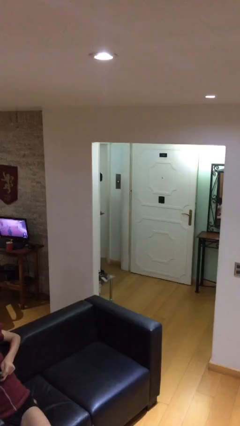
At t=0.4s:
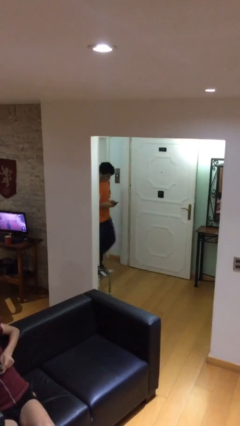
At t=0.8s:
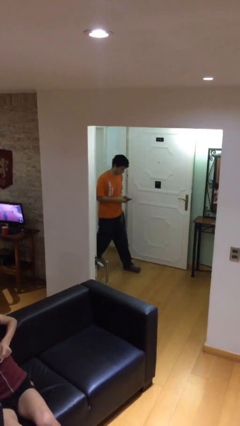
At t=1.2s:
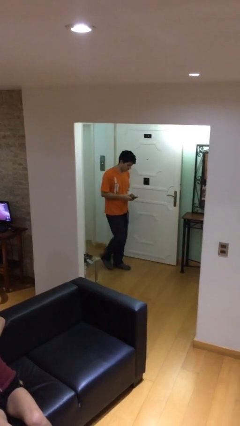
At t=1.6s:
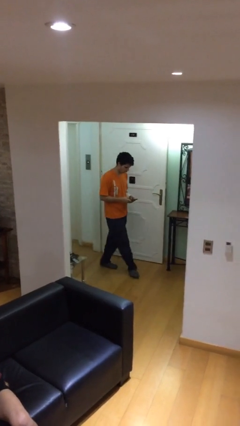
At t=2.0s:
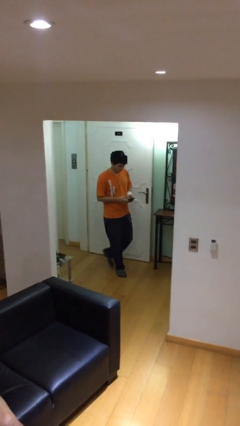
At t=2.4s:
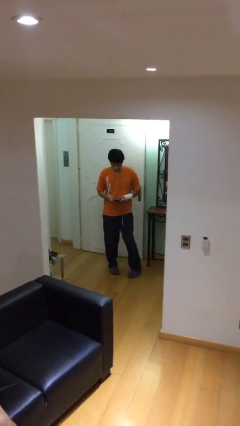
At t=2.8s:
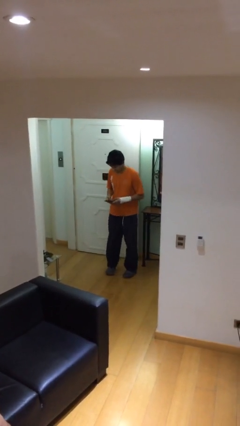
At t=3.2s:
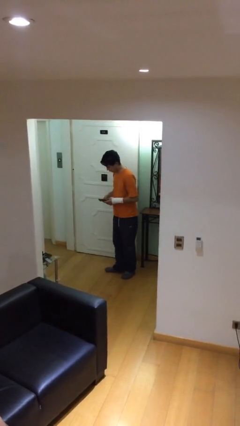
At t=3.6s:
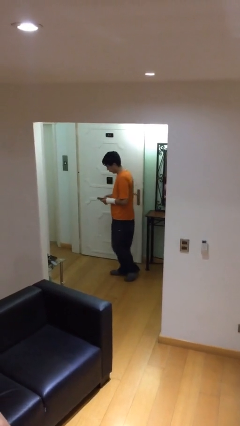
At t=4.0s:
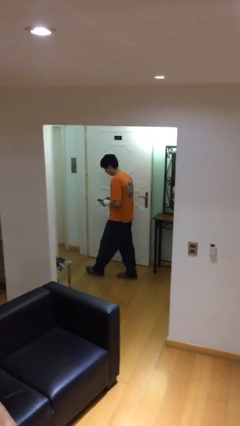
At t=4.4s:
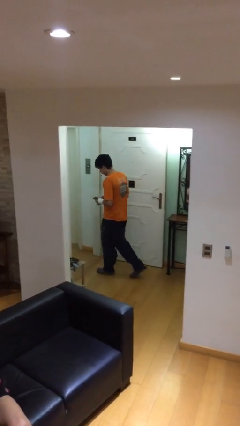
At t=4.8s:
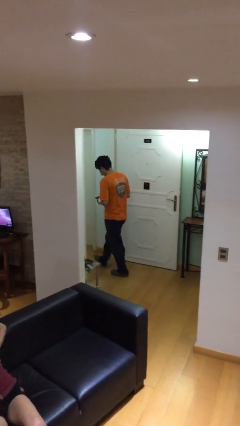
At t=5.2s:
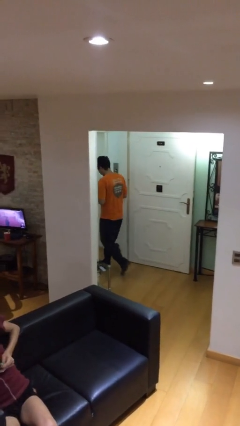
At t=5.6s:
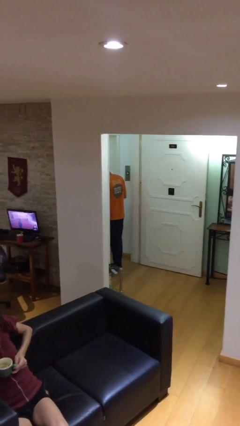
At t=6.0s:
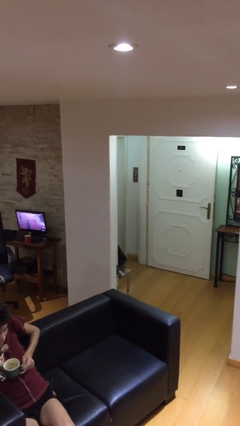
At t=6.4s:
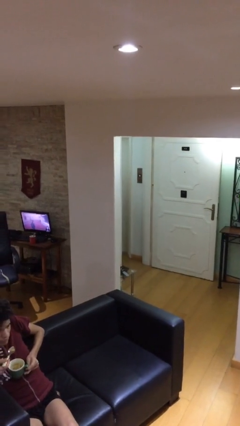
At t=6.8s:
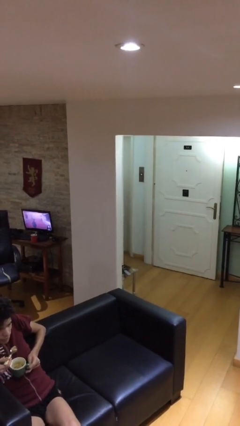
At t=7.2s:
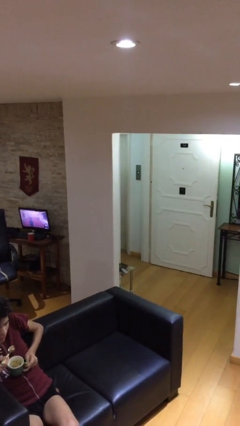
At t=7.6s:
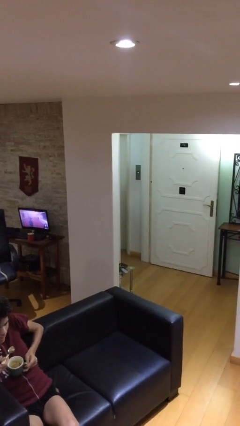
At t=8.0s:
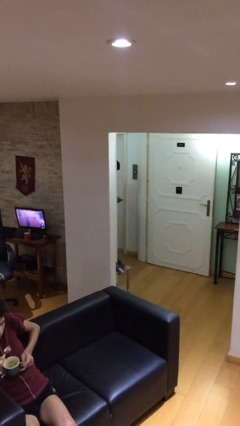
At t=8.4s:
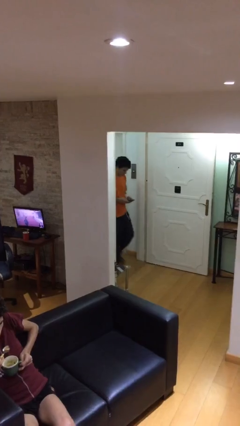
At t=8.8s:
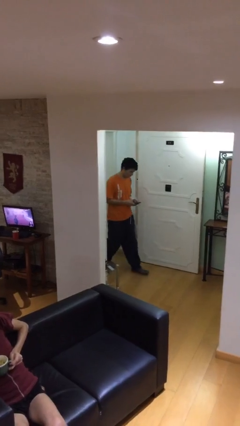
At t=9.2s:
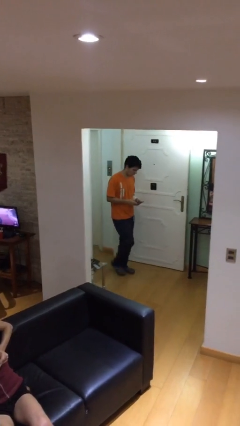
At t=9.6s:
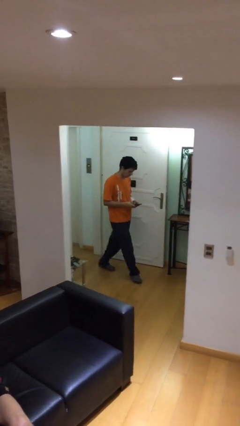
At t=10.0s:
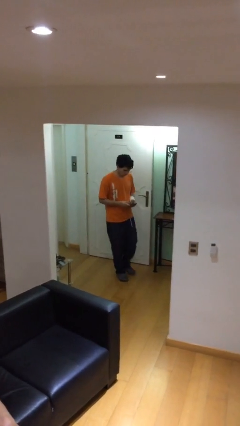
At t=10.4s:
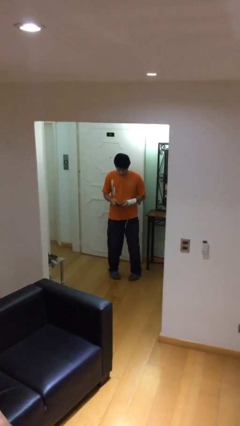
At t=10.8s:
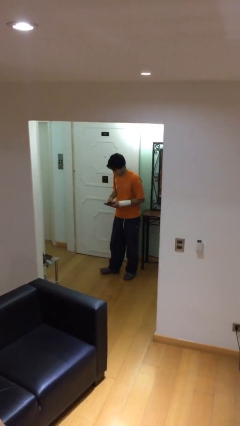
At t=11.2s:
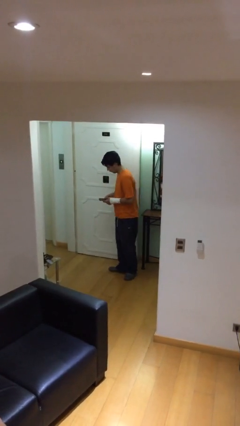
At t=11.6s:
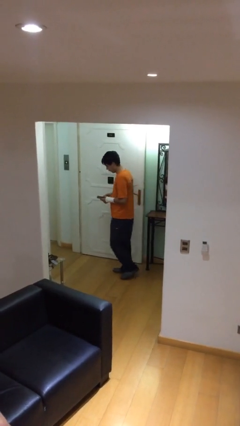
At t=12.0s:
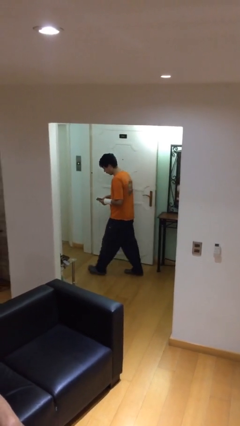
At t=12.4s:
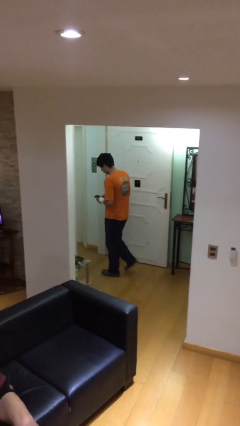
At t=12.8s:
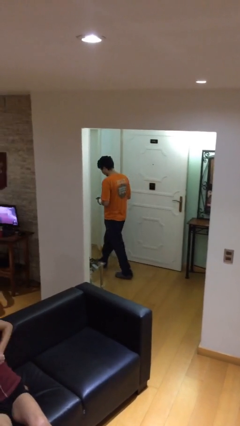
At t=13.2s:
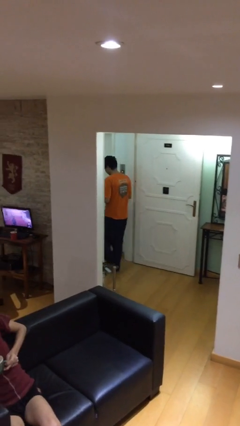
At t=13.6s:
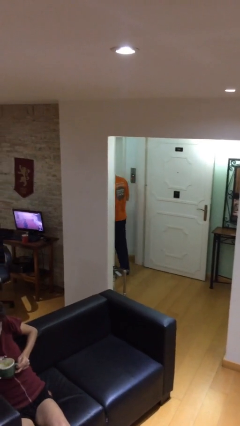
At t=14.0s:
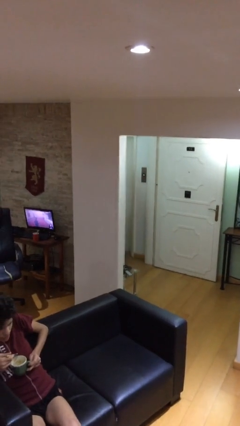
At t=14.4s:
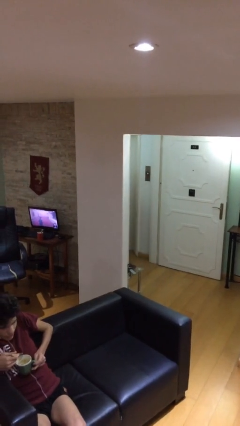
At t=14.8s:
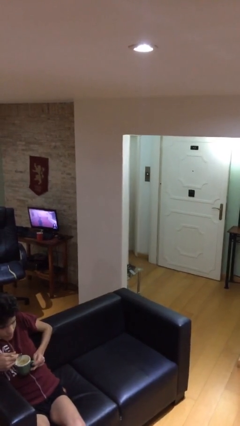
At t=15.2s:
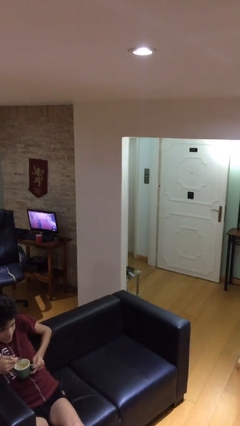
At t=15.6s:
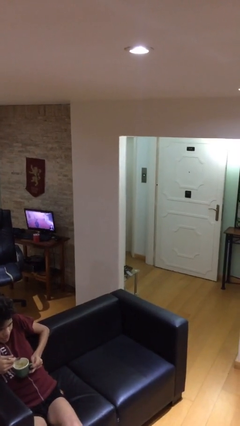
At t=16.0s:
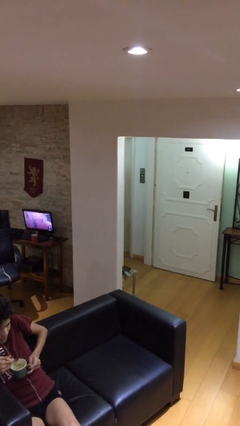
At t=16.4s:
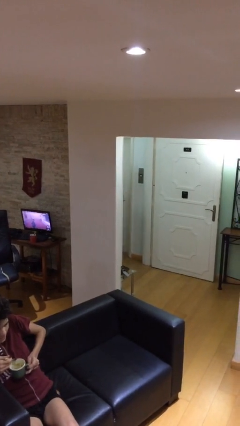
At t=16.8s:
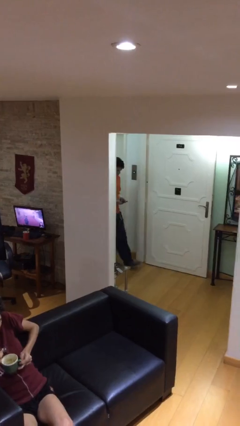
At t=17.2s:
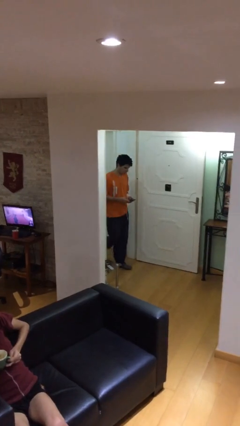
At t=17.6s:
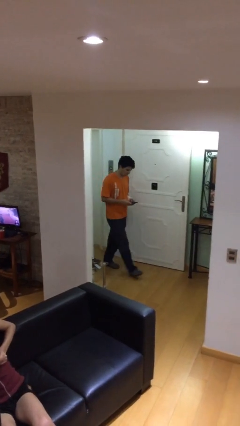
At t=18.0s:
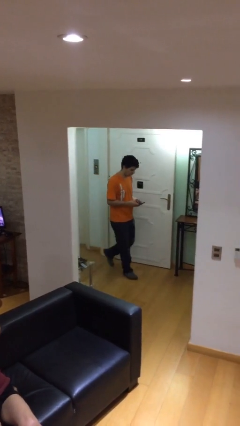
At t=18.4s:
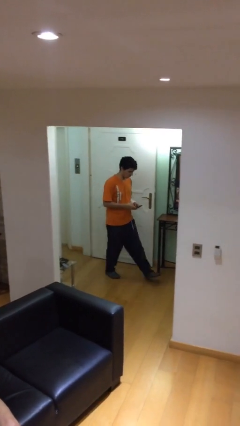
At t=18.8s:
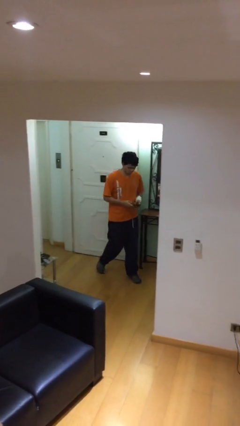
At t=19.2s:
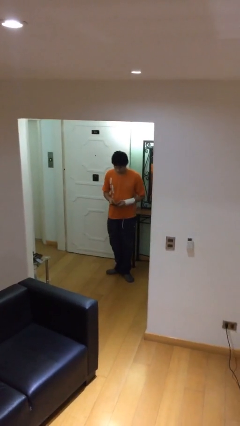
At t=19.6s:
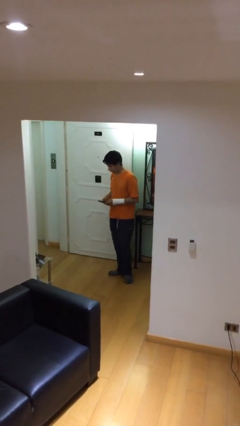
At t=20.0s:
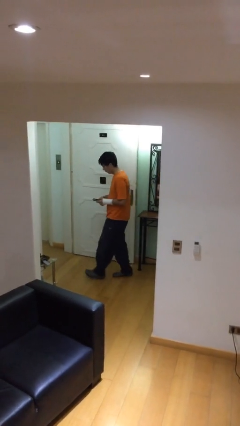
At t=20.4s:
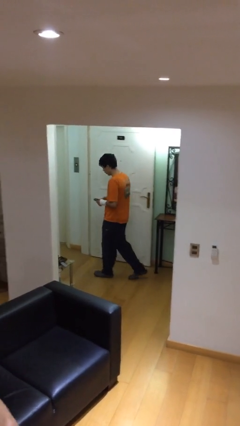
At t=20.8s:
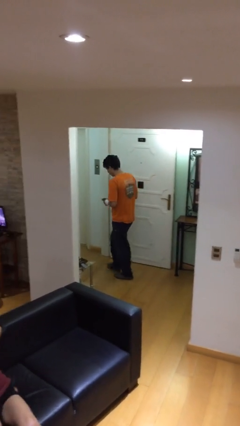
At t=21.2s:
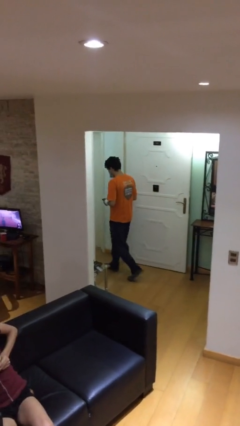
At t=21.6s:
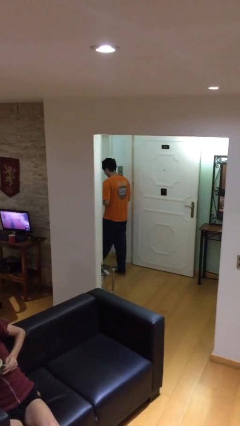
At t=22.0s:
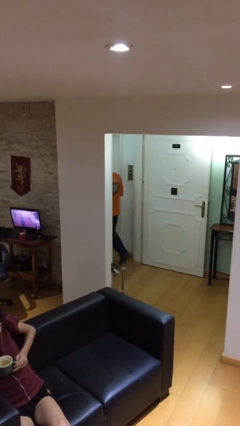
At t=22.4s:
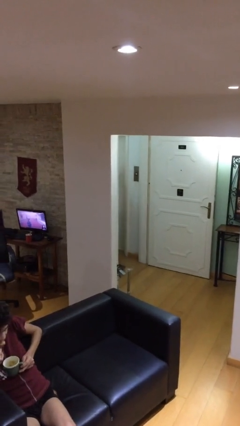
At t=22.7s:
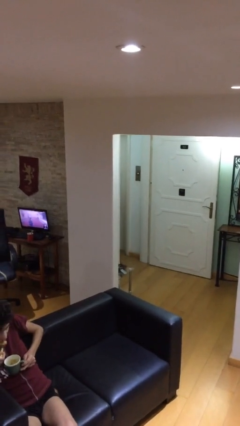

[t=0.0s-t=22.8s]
person texts on phone

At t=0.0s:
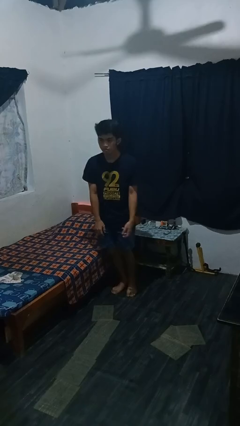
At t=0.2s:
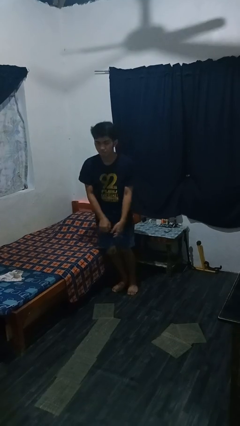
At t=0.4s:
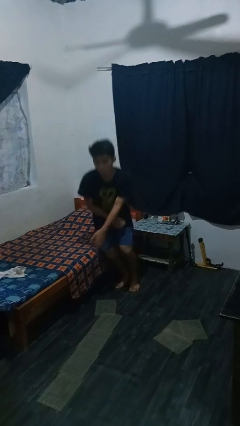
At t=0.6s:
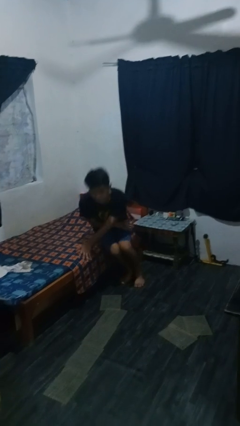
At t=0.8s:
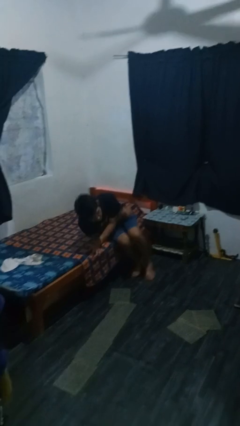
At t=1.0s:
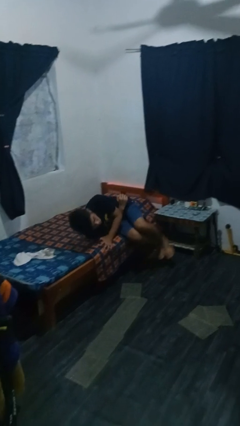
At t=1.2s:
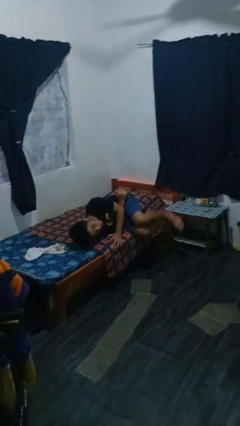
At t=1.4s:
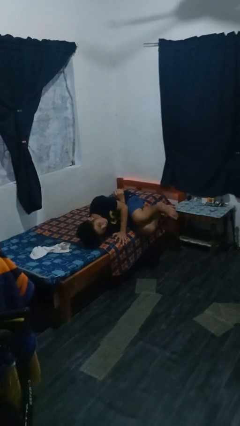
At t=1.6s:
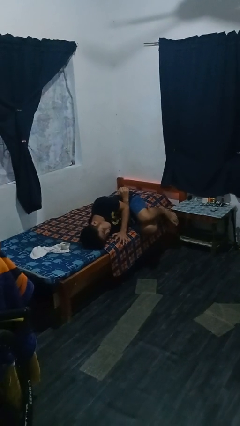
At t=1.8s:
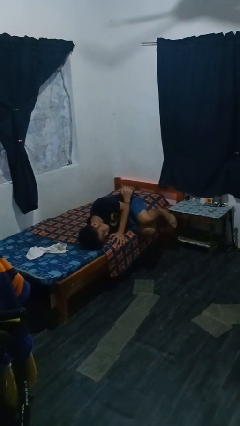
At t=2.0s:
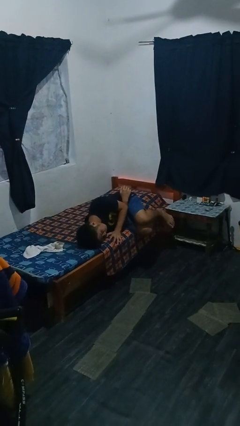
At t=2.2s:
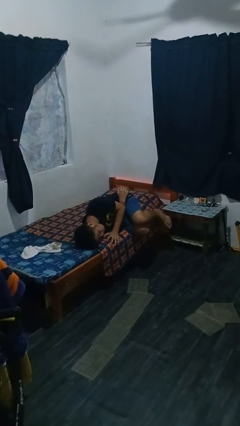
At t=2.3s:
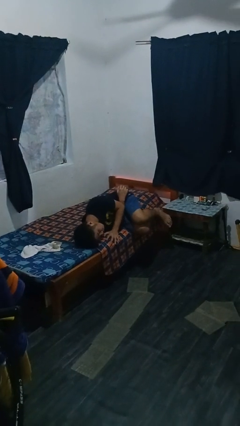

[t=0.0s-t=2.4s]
person lies down on bed

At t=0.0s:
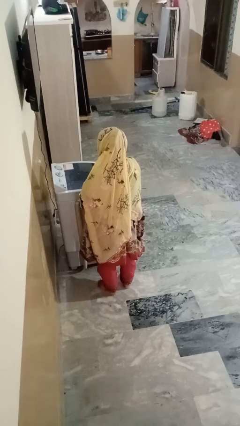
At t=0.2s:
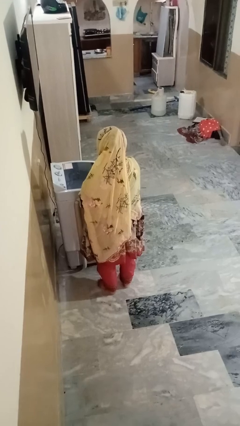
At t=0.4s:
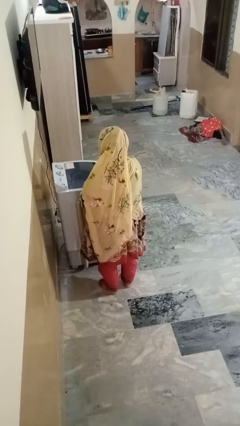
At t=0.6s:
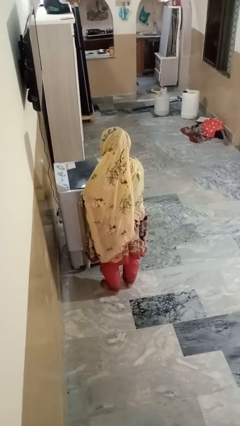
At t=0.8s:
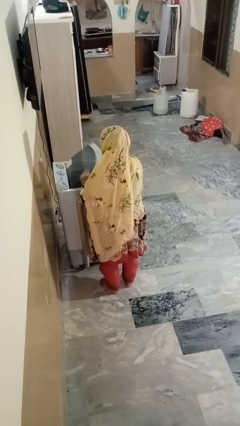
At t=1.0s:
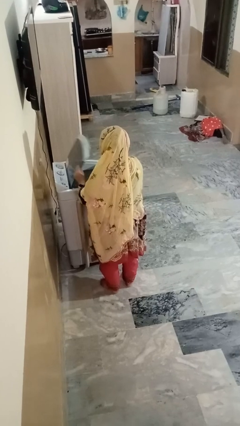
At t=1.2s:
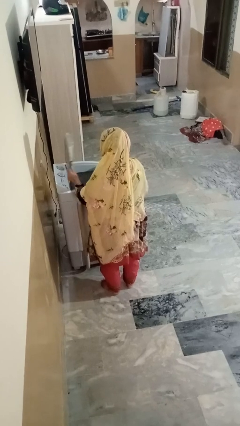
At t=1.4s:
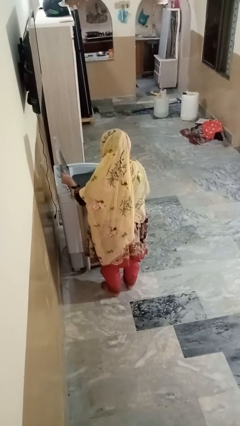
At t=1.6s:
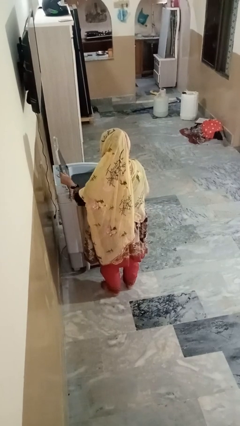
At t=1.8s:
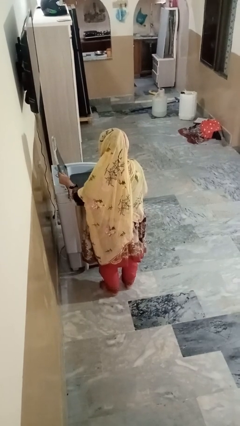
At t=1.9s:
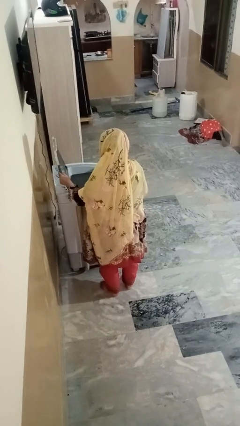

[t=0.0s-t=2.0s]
person opens clothes washer

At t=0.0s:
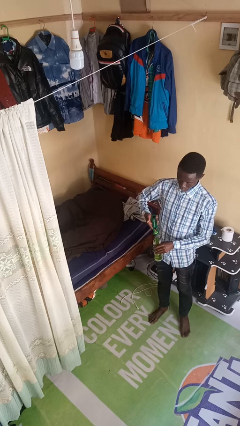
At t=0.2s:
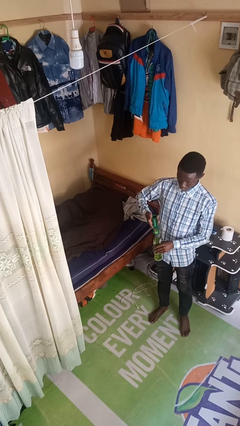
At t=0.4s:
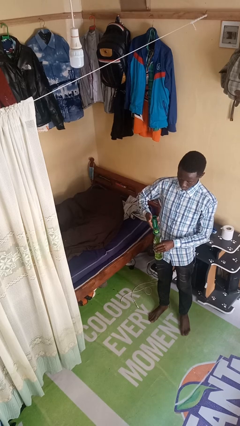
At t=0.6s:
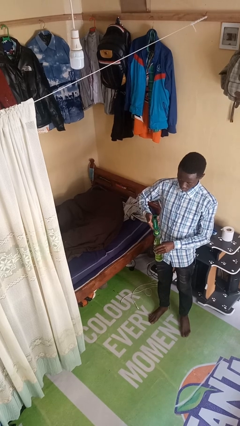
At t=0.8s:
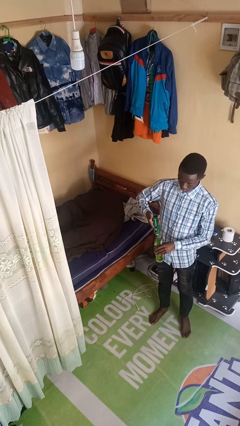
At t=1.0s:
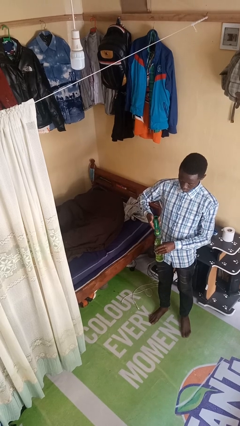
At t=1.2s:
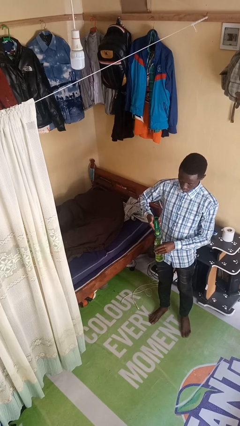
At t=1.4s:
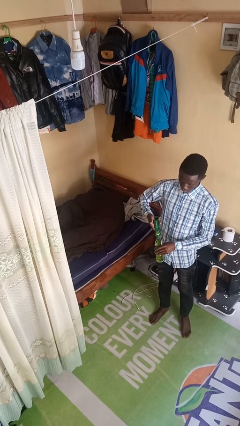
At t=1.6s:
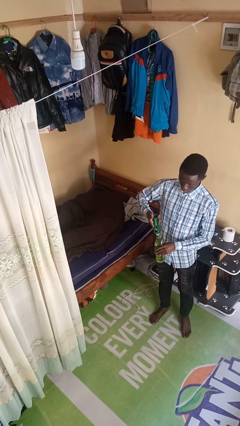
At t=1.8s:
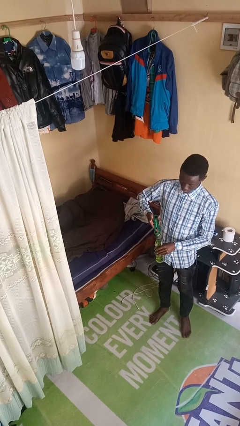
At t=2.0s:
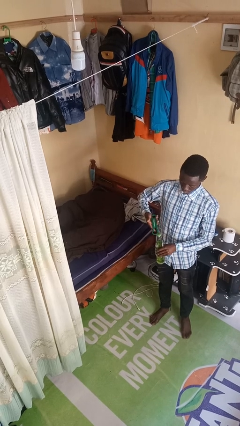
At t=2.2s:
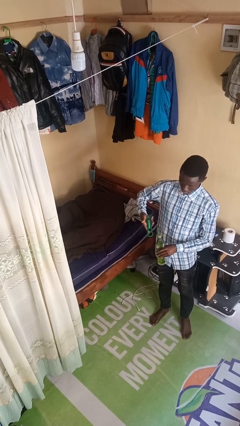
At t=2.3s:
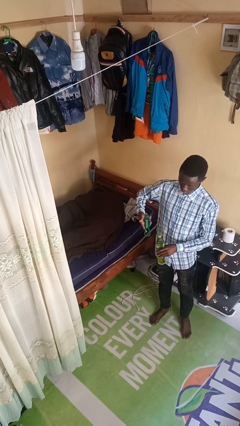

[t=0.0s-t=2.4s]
person opens can with can opener
